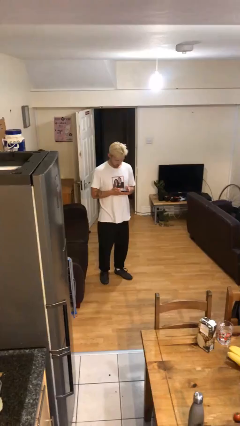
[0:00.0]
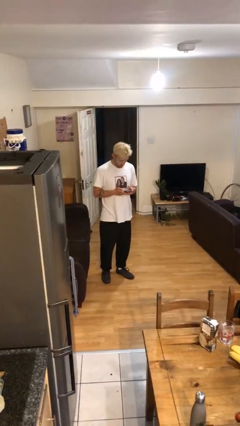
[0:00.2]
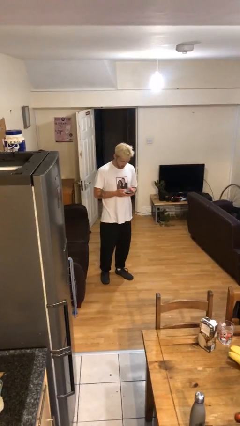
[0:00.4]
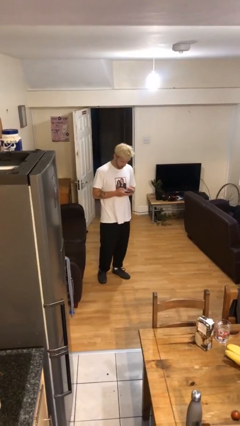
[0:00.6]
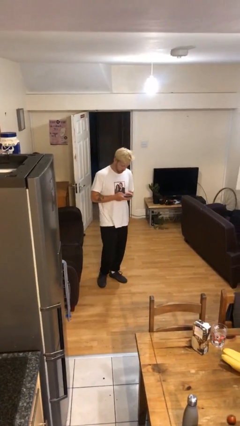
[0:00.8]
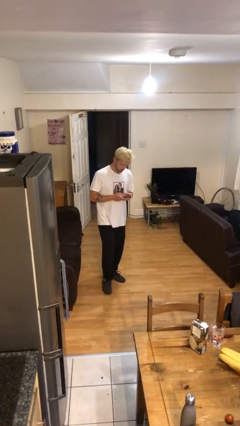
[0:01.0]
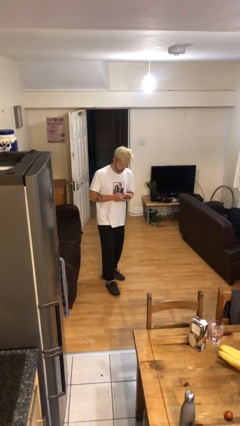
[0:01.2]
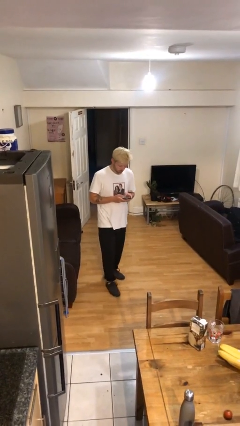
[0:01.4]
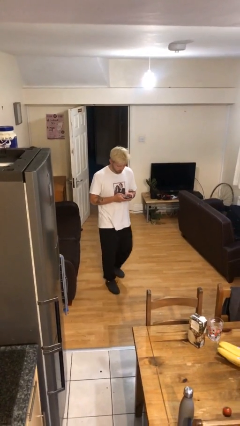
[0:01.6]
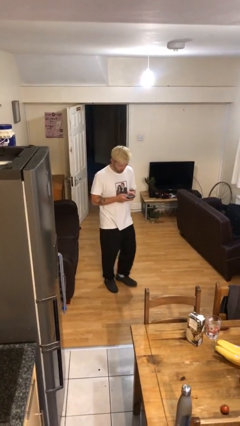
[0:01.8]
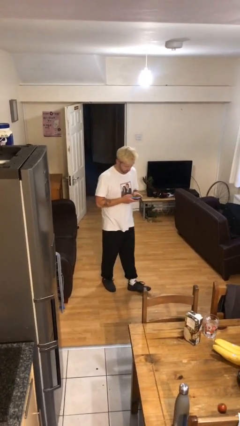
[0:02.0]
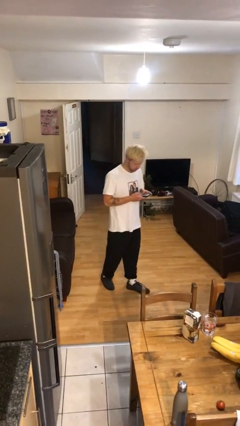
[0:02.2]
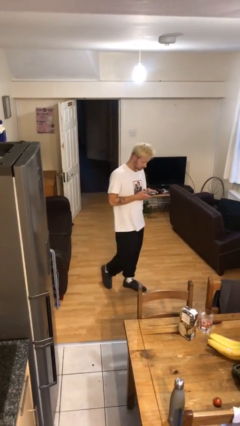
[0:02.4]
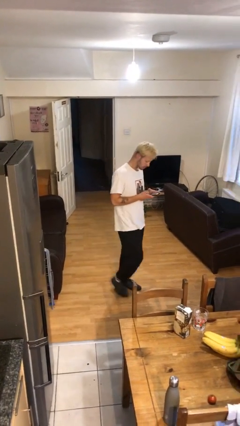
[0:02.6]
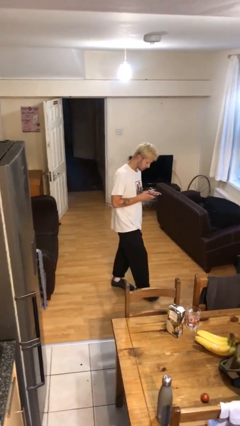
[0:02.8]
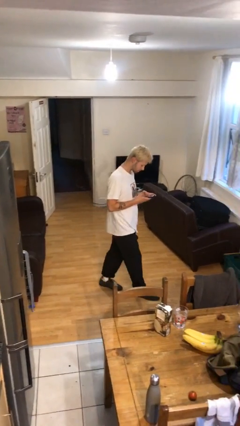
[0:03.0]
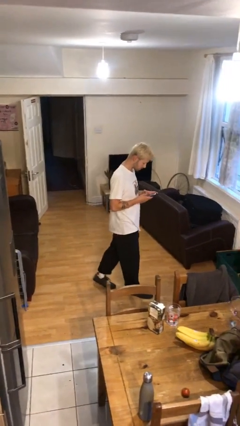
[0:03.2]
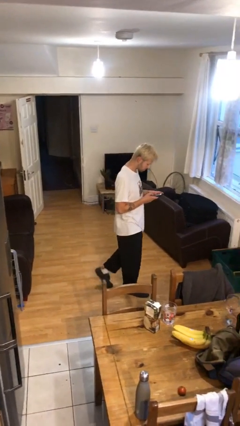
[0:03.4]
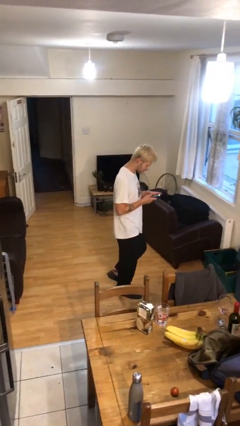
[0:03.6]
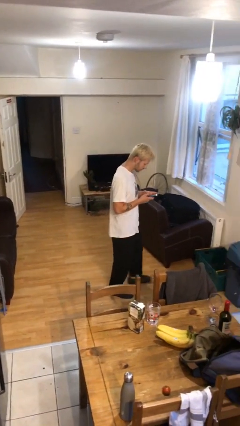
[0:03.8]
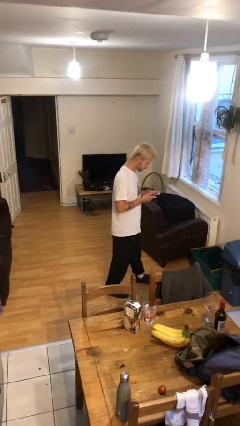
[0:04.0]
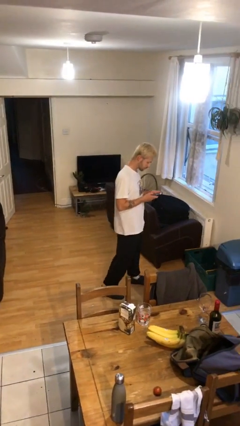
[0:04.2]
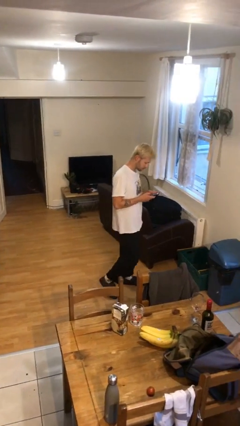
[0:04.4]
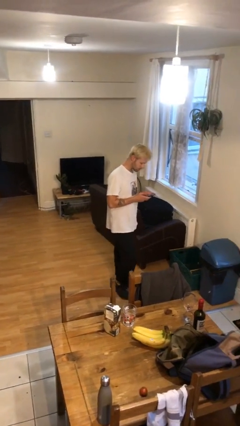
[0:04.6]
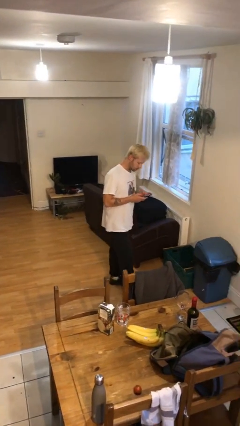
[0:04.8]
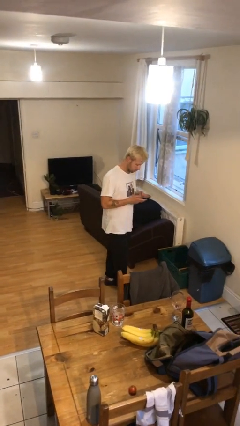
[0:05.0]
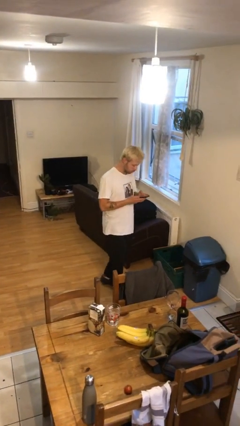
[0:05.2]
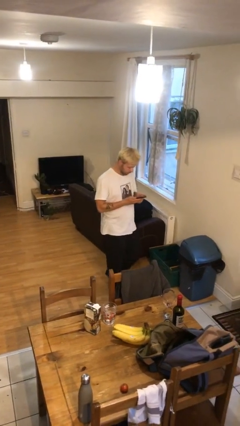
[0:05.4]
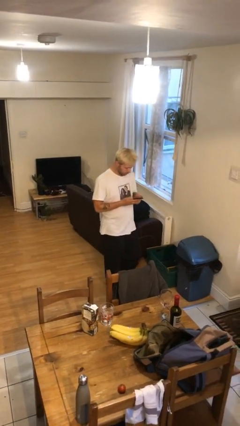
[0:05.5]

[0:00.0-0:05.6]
person texts on phone

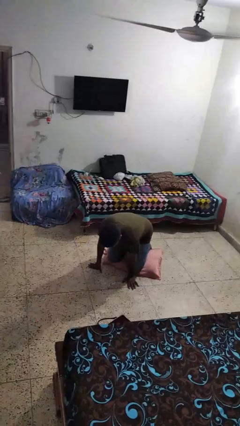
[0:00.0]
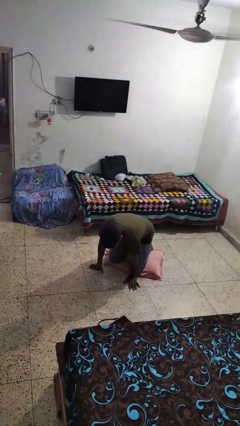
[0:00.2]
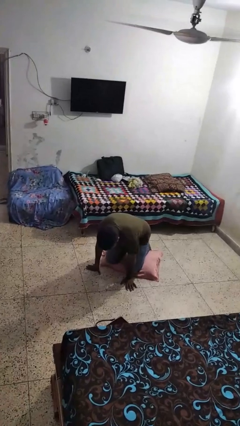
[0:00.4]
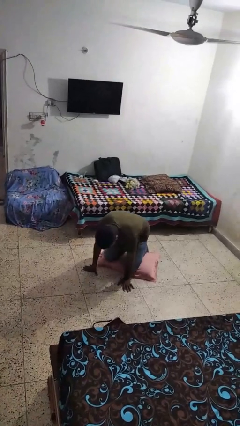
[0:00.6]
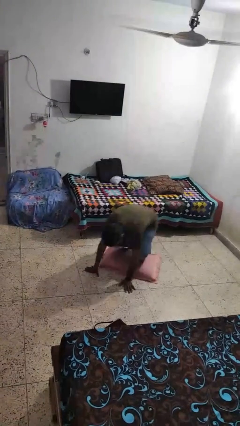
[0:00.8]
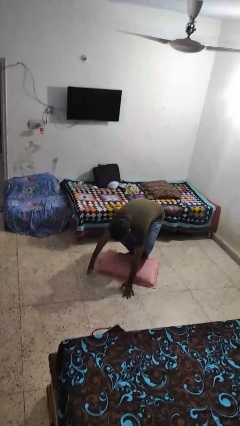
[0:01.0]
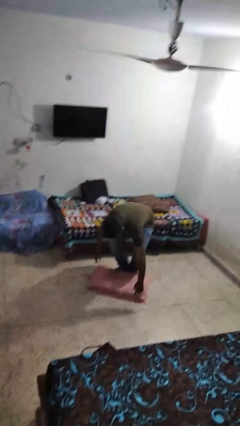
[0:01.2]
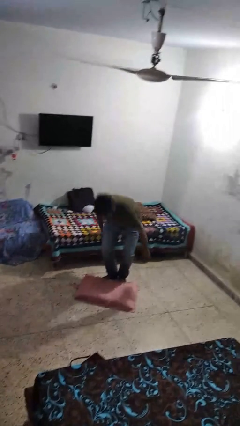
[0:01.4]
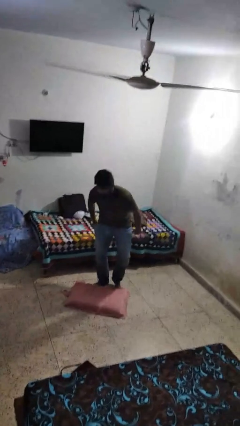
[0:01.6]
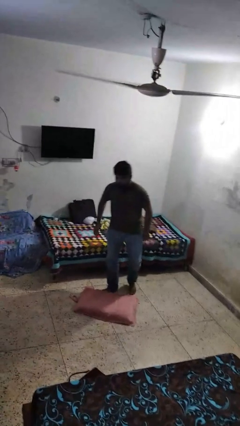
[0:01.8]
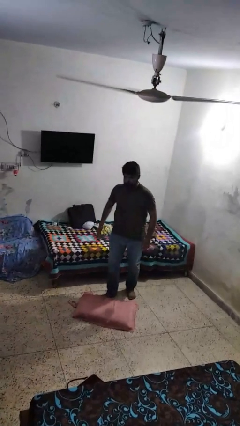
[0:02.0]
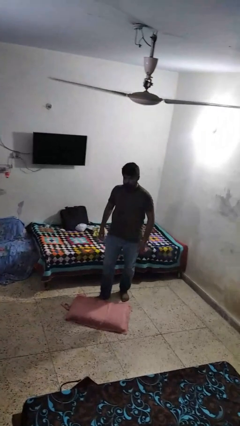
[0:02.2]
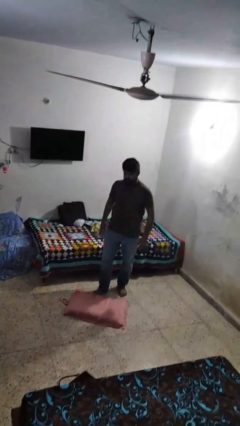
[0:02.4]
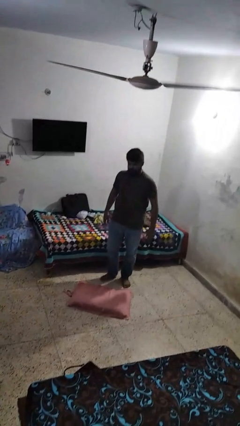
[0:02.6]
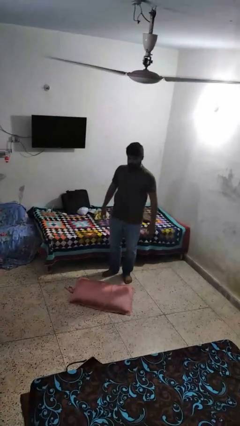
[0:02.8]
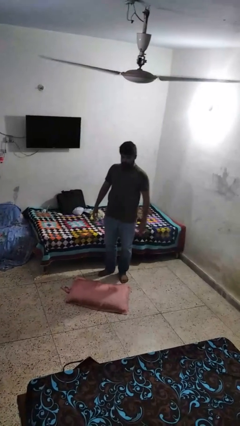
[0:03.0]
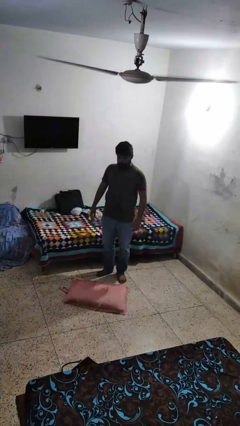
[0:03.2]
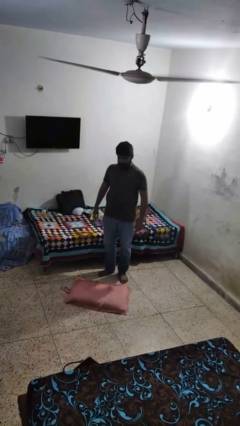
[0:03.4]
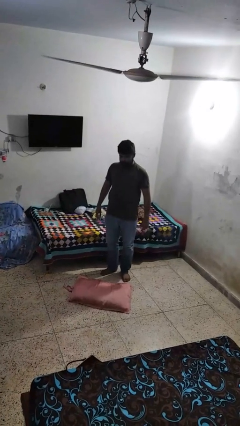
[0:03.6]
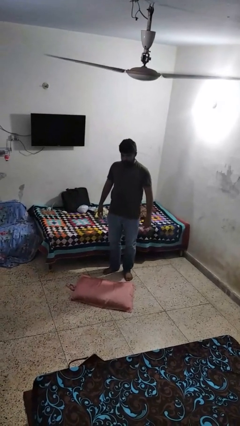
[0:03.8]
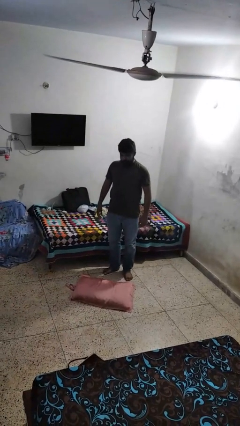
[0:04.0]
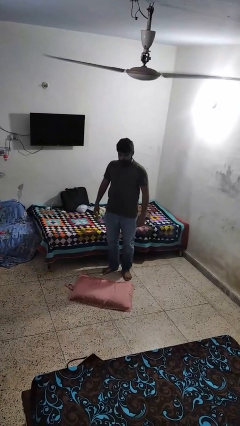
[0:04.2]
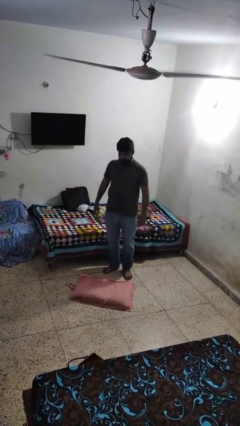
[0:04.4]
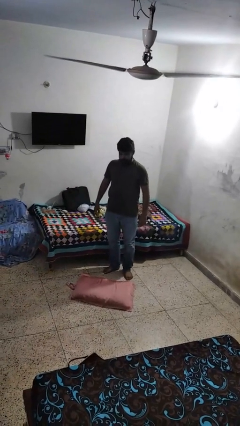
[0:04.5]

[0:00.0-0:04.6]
person stands up from floor

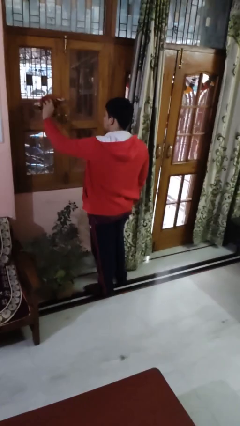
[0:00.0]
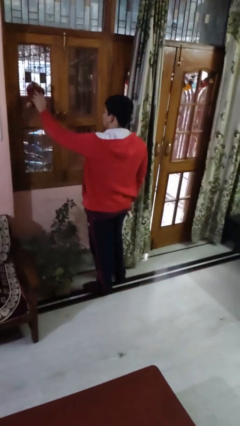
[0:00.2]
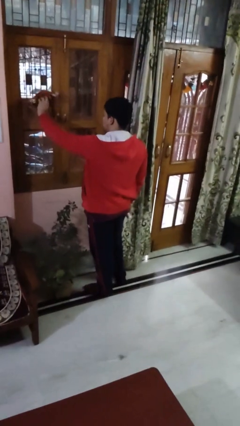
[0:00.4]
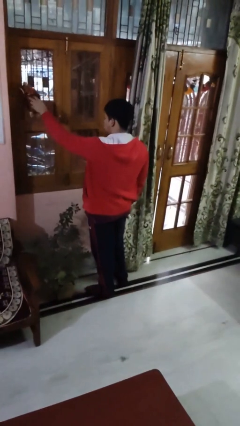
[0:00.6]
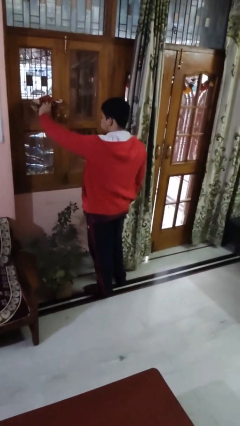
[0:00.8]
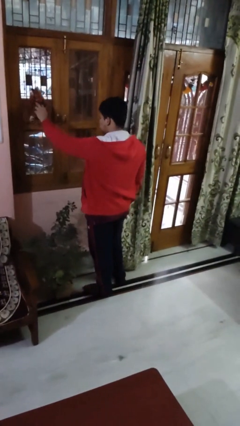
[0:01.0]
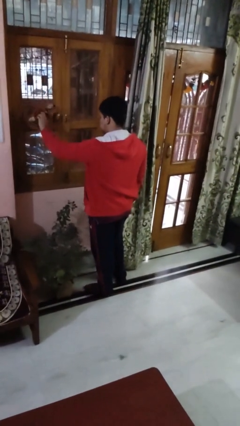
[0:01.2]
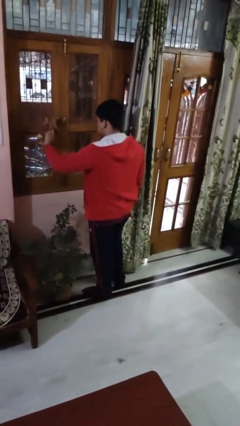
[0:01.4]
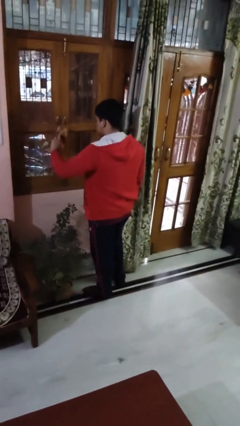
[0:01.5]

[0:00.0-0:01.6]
person washes window

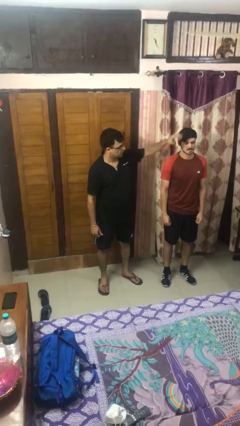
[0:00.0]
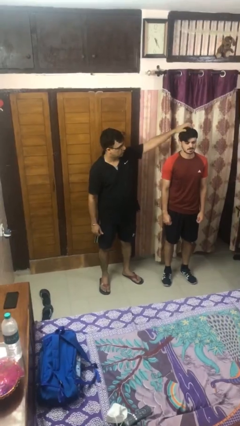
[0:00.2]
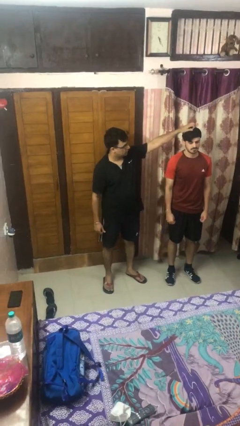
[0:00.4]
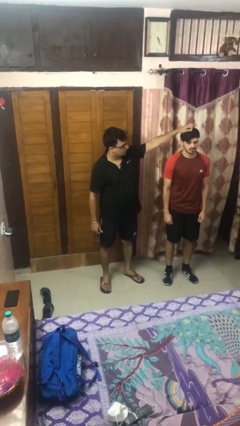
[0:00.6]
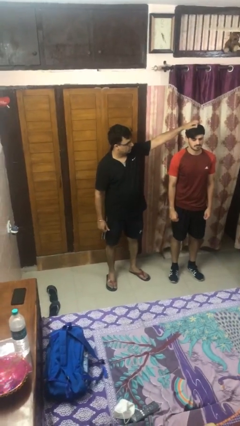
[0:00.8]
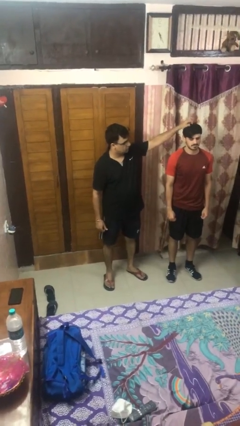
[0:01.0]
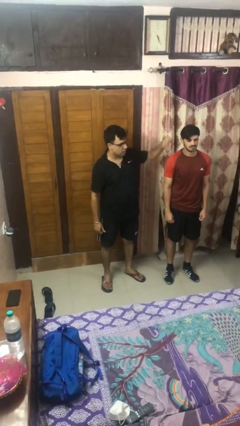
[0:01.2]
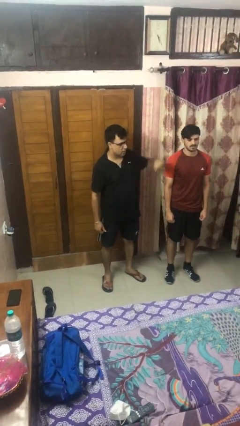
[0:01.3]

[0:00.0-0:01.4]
person grabs person by hair

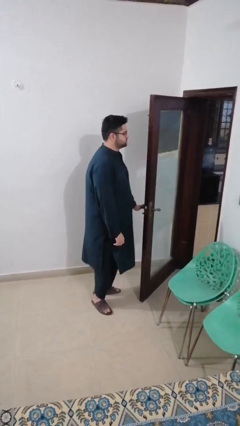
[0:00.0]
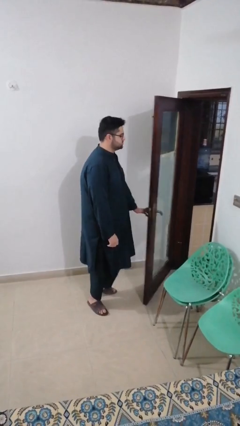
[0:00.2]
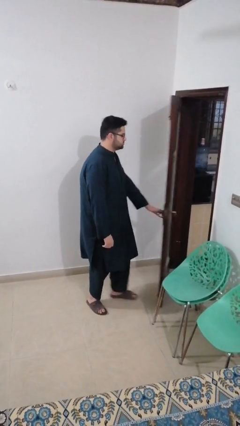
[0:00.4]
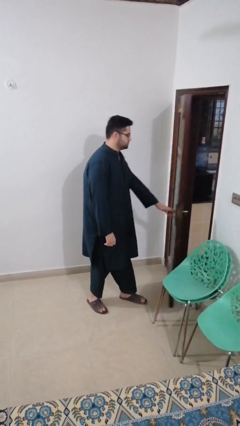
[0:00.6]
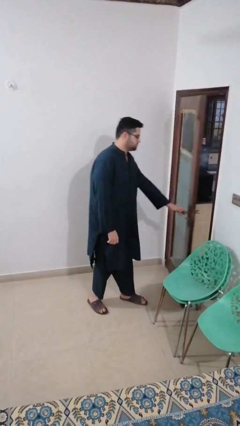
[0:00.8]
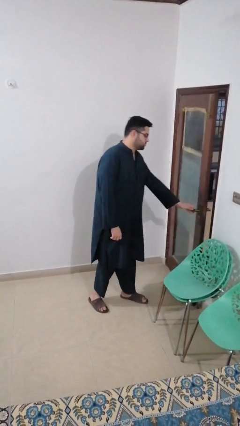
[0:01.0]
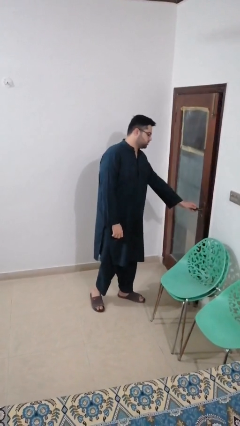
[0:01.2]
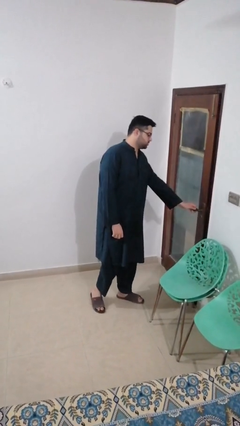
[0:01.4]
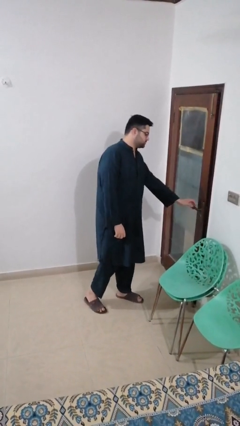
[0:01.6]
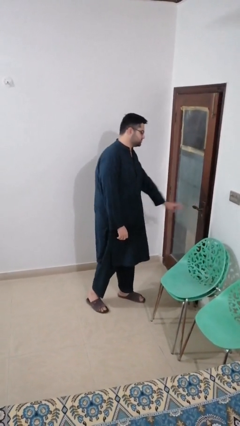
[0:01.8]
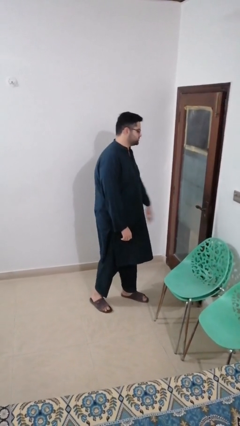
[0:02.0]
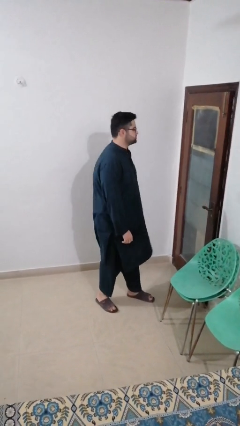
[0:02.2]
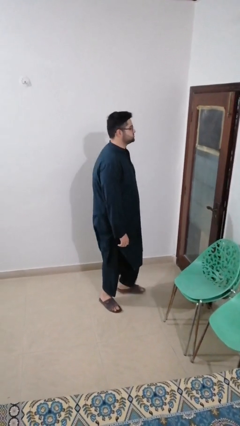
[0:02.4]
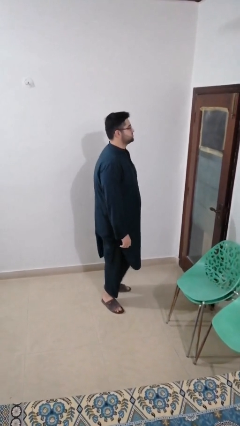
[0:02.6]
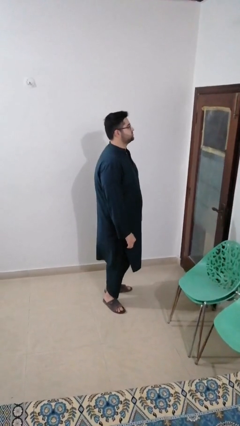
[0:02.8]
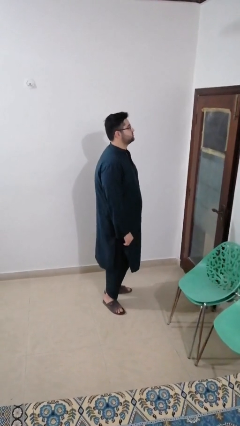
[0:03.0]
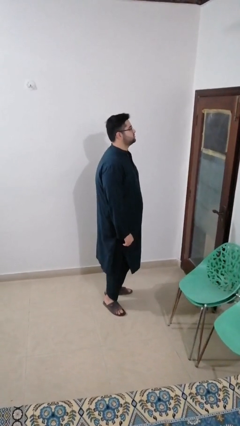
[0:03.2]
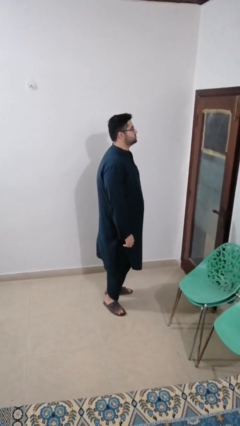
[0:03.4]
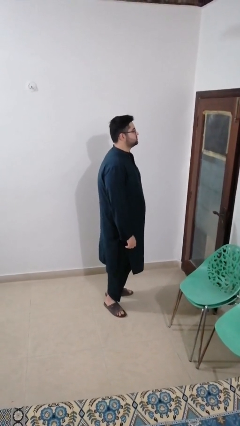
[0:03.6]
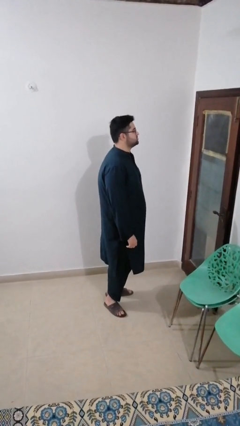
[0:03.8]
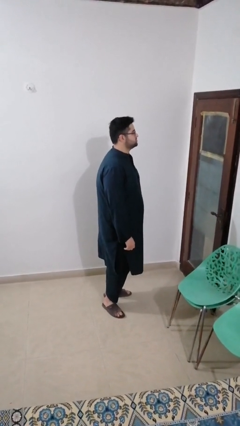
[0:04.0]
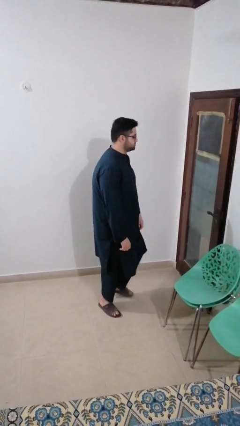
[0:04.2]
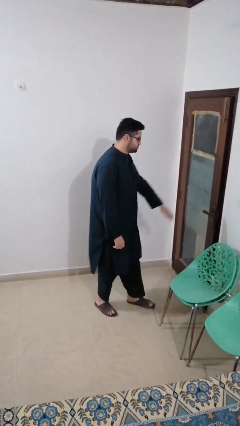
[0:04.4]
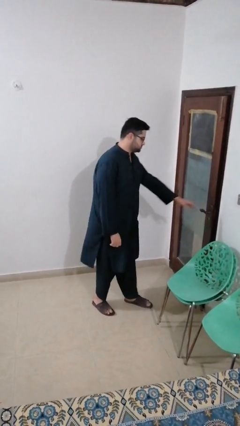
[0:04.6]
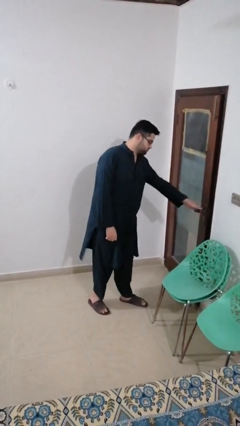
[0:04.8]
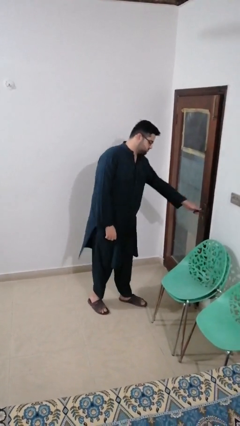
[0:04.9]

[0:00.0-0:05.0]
person closes facility door
